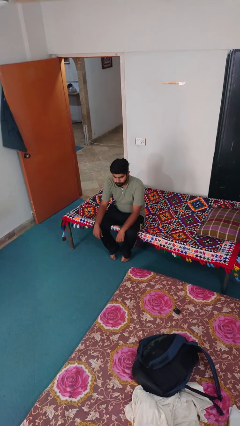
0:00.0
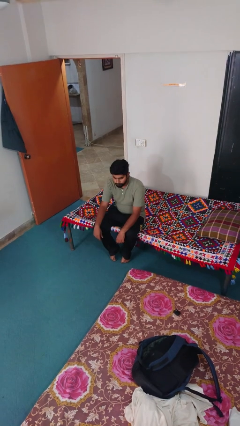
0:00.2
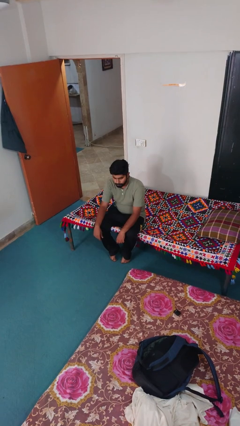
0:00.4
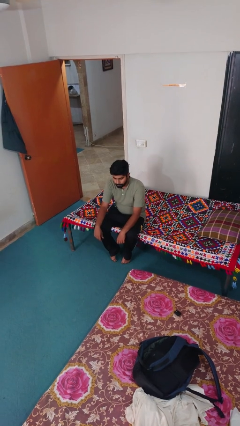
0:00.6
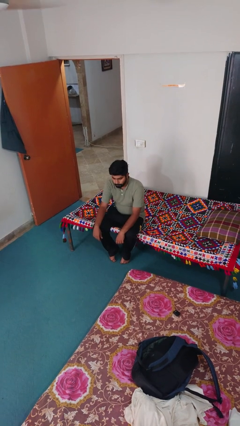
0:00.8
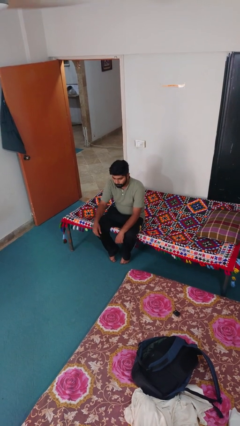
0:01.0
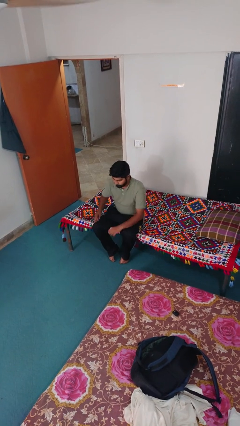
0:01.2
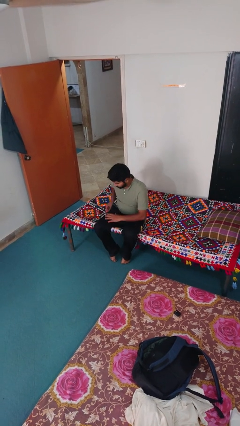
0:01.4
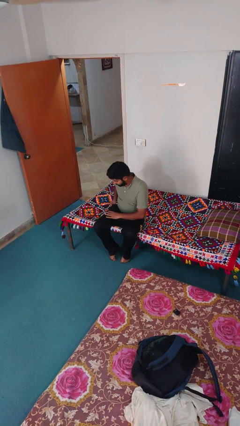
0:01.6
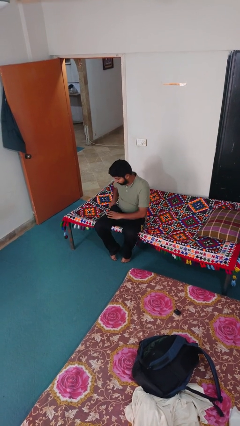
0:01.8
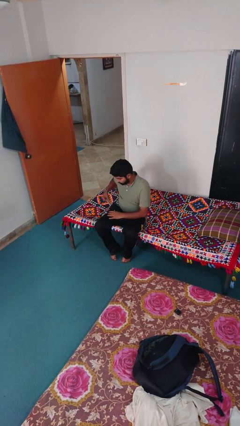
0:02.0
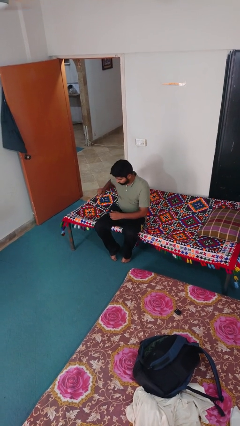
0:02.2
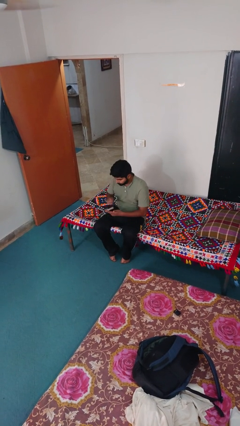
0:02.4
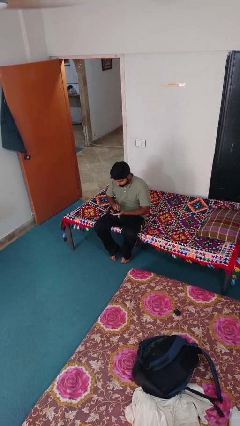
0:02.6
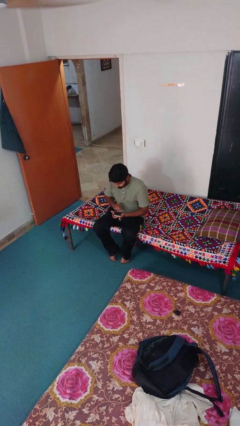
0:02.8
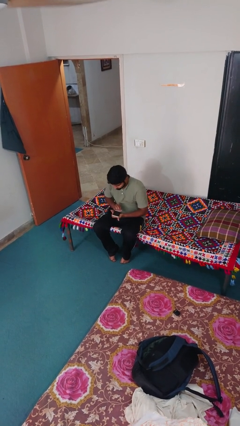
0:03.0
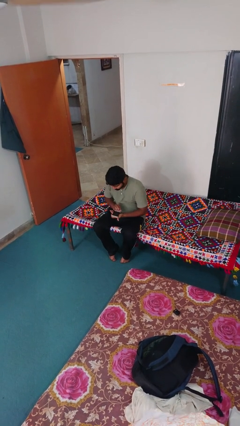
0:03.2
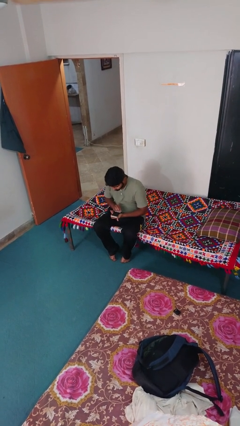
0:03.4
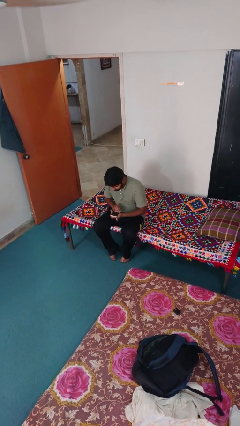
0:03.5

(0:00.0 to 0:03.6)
person takes phone from pocket

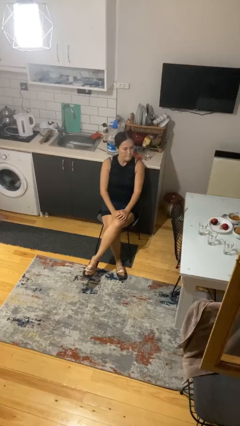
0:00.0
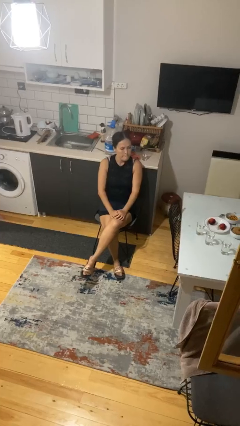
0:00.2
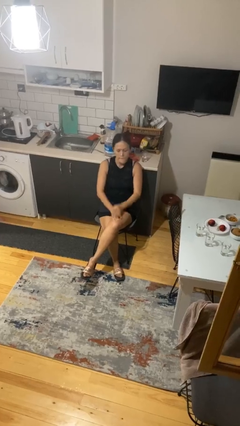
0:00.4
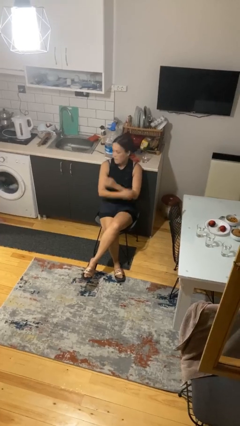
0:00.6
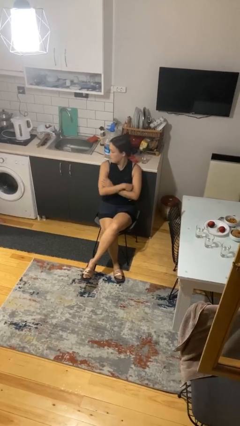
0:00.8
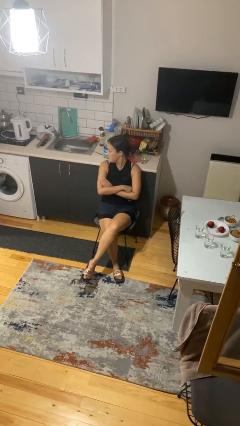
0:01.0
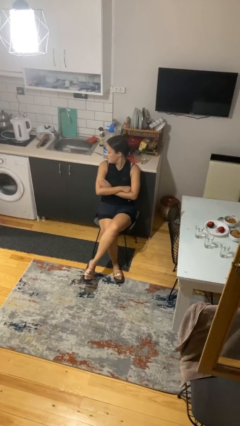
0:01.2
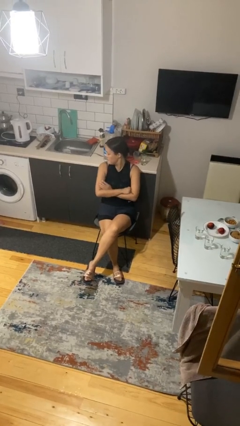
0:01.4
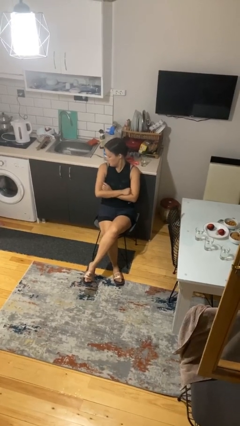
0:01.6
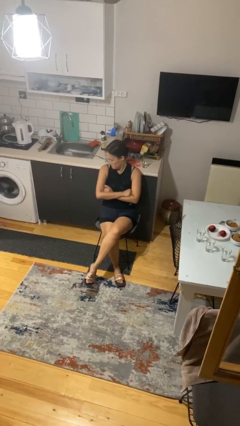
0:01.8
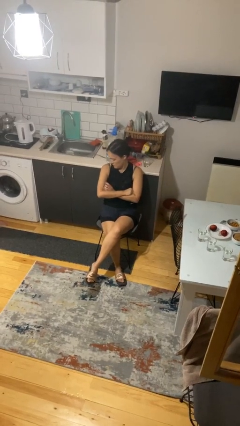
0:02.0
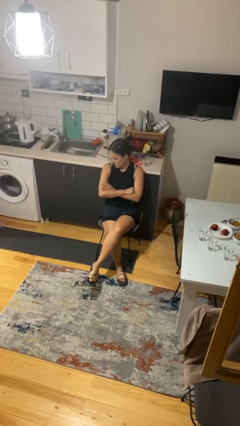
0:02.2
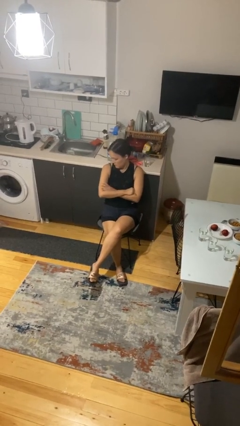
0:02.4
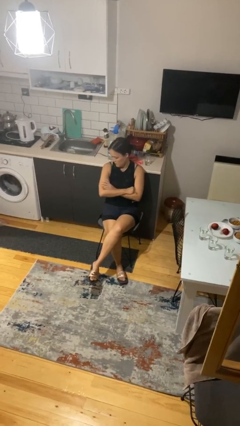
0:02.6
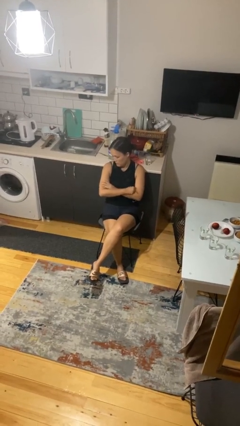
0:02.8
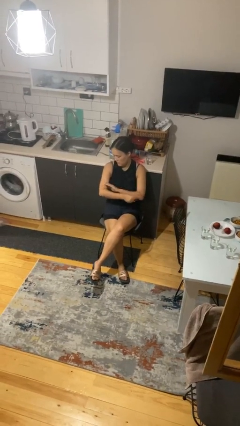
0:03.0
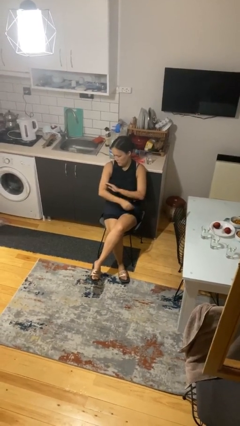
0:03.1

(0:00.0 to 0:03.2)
person crosses arms

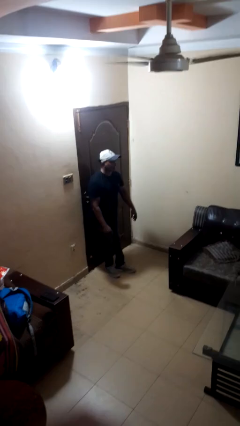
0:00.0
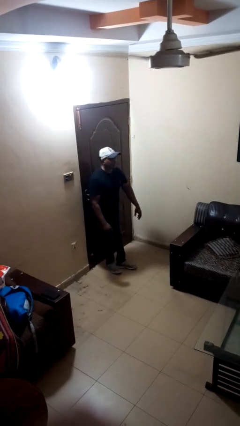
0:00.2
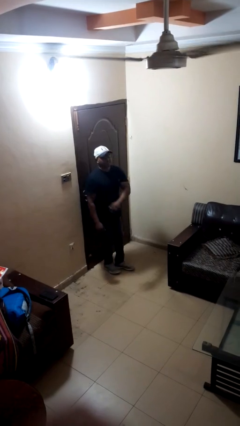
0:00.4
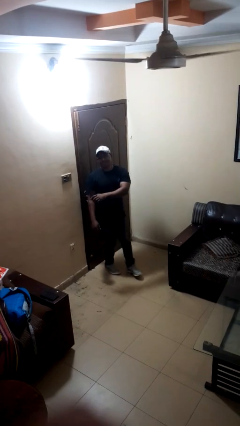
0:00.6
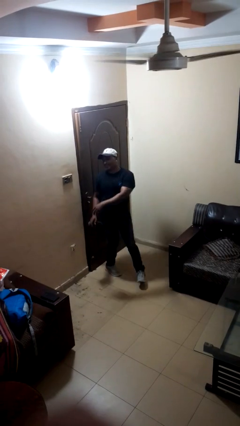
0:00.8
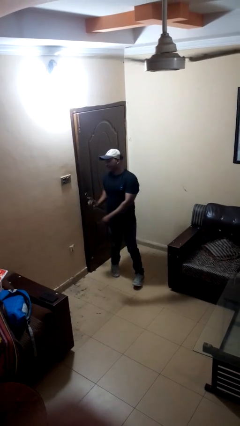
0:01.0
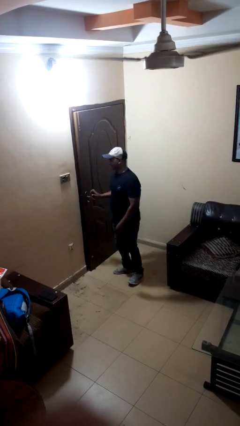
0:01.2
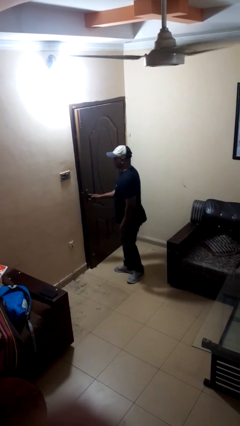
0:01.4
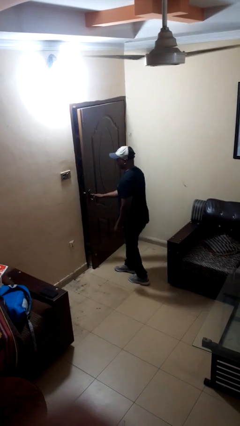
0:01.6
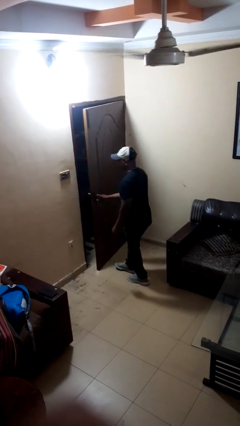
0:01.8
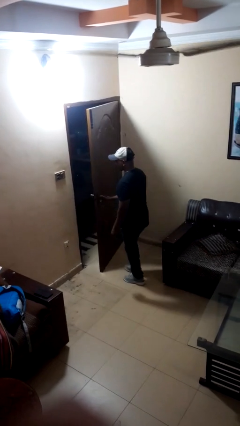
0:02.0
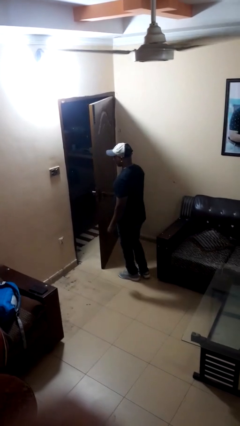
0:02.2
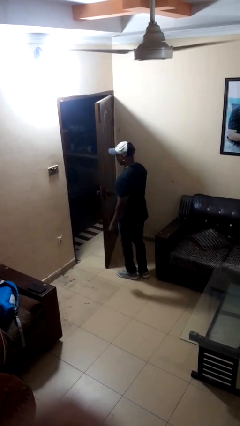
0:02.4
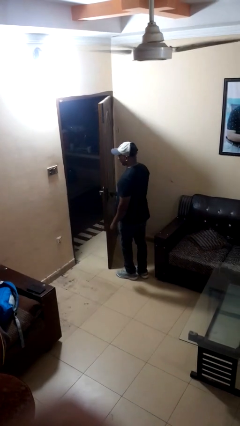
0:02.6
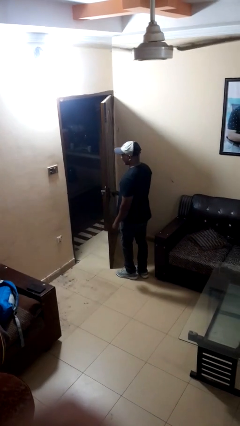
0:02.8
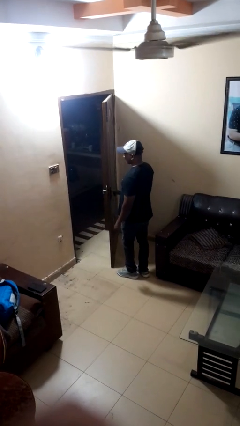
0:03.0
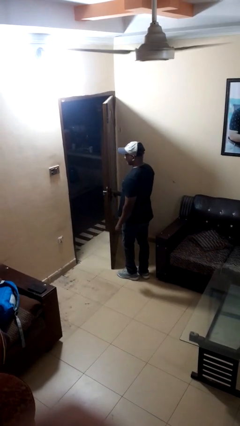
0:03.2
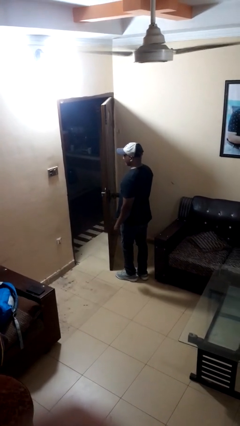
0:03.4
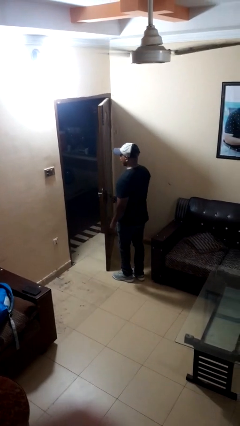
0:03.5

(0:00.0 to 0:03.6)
person opens facility door

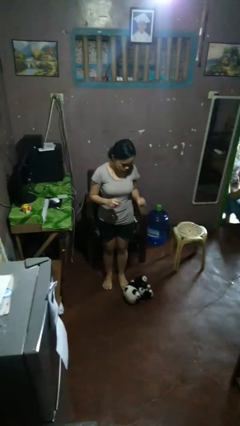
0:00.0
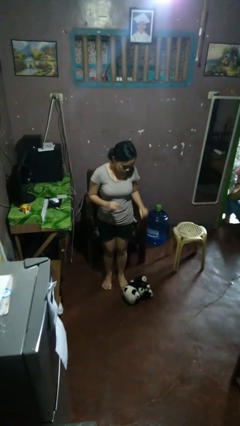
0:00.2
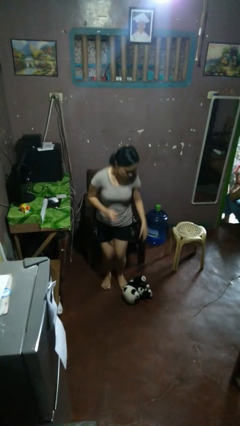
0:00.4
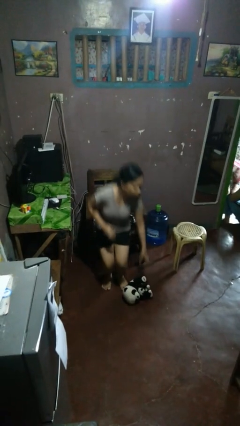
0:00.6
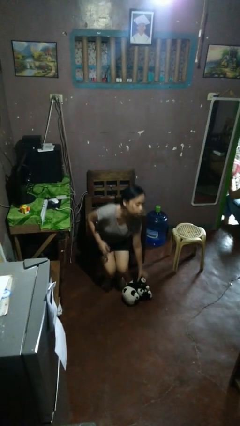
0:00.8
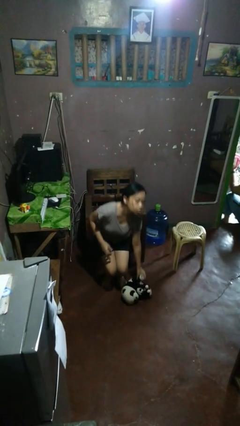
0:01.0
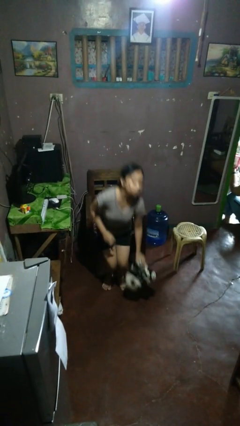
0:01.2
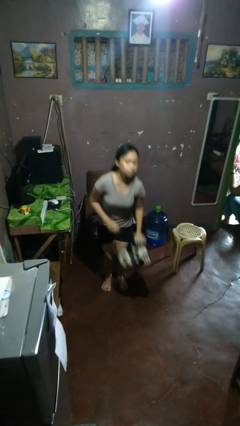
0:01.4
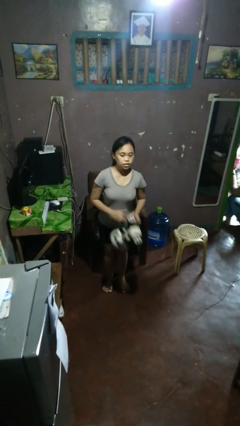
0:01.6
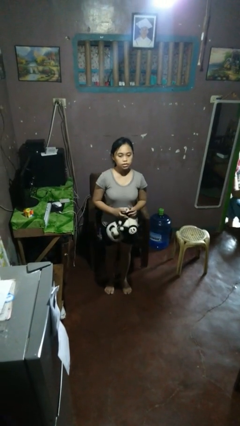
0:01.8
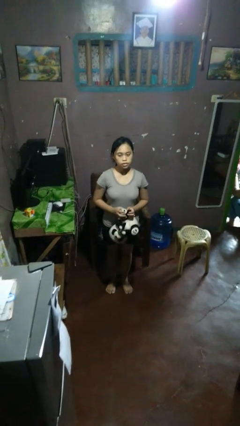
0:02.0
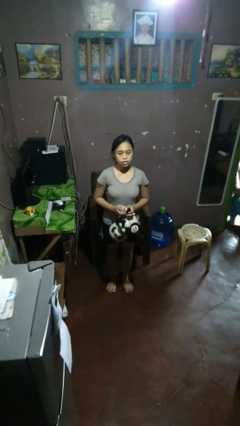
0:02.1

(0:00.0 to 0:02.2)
person picks up object from floor

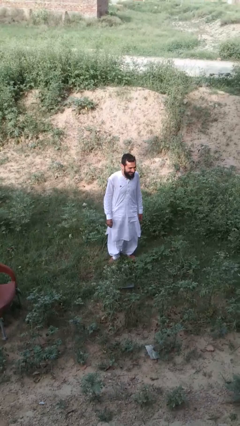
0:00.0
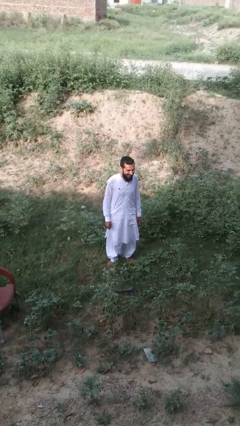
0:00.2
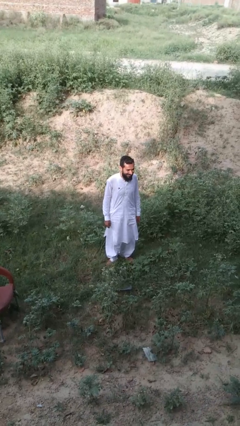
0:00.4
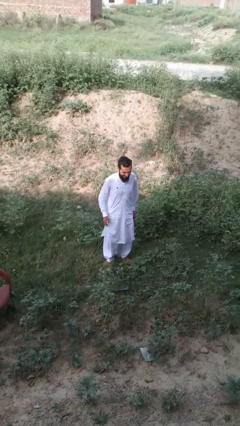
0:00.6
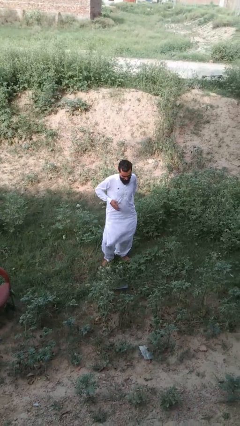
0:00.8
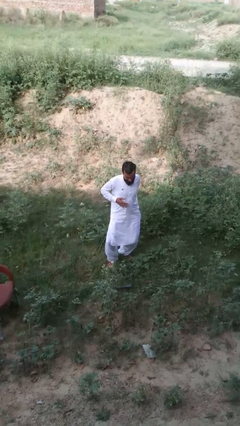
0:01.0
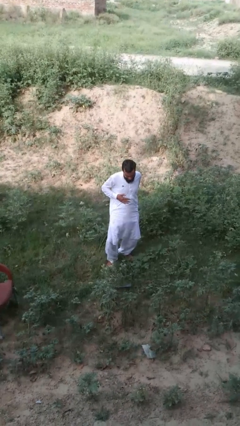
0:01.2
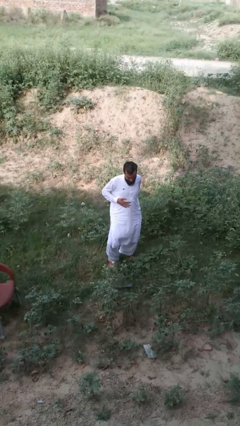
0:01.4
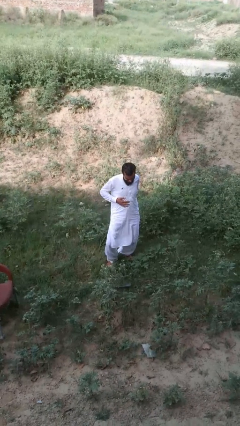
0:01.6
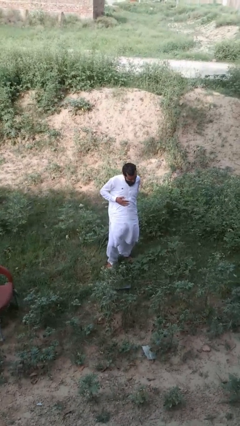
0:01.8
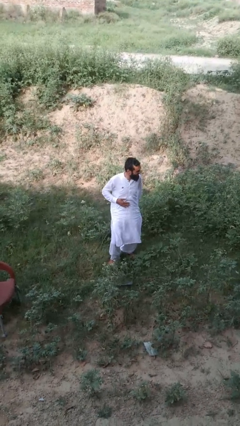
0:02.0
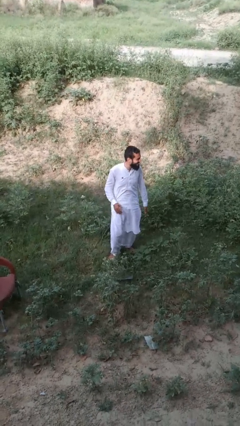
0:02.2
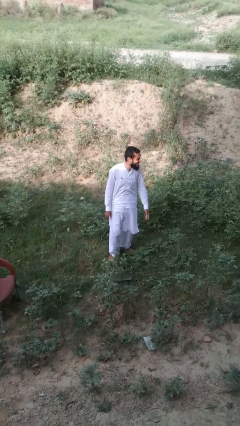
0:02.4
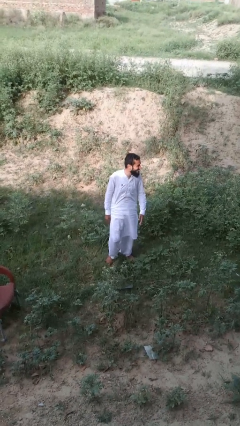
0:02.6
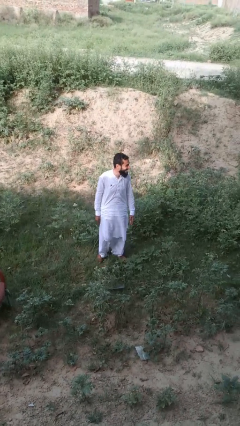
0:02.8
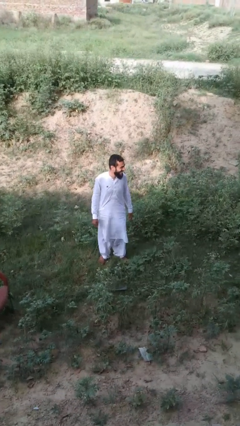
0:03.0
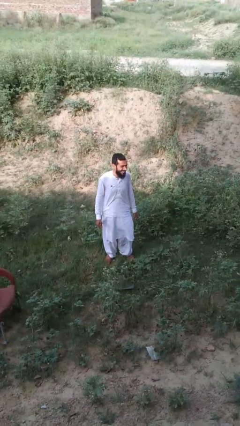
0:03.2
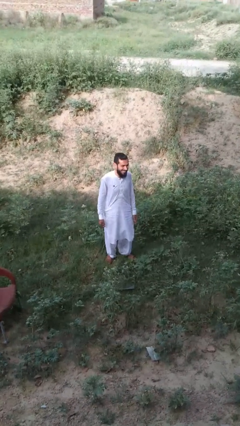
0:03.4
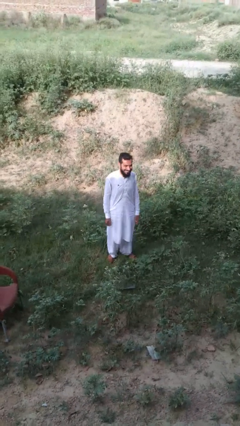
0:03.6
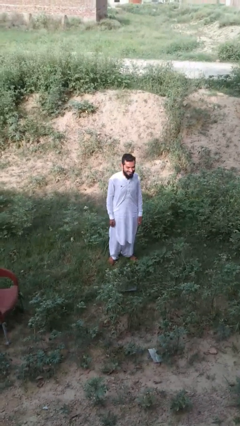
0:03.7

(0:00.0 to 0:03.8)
person dances in place

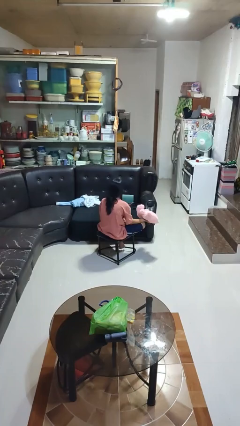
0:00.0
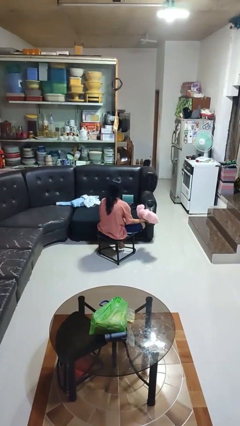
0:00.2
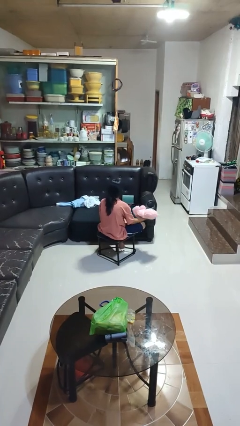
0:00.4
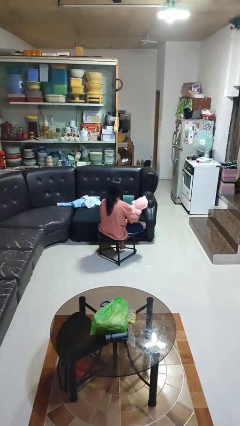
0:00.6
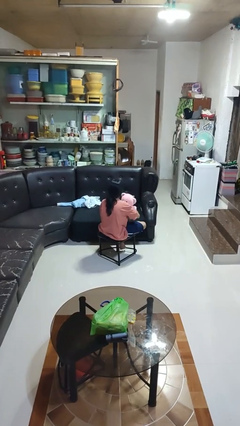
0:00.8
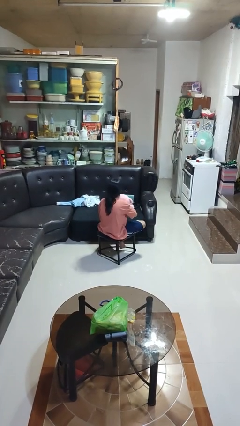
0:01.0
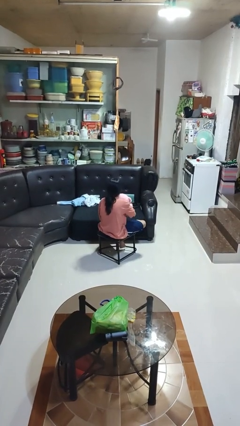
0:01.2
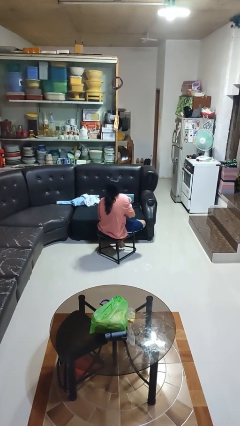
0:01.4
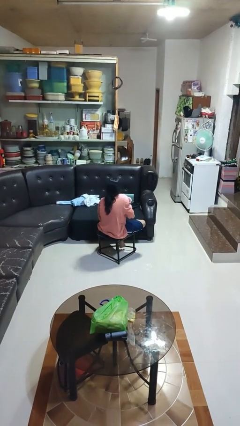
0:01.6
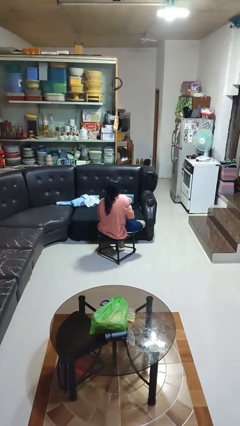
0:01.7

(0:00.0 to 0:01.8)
person hugs stuffed animal
